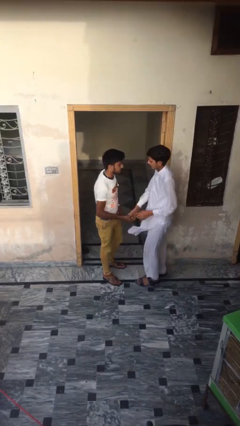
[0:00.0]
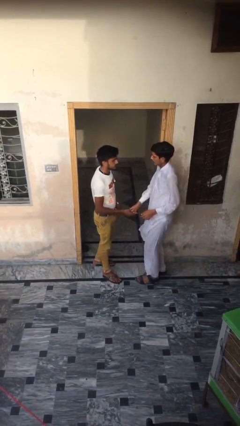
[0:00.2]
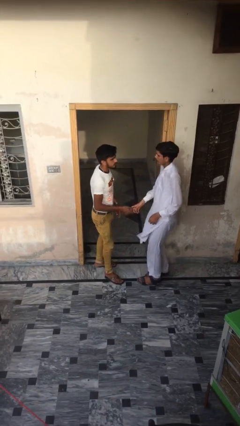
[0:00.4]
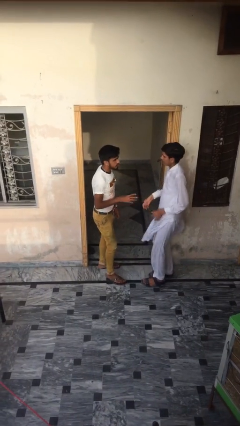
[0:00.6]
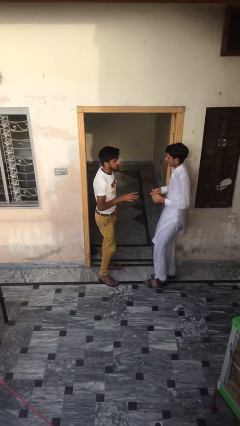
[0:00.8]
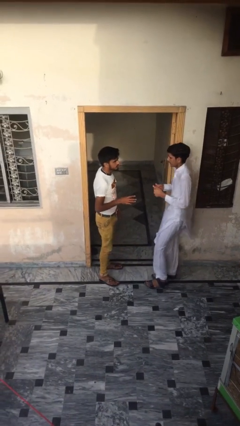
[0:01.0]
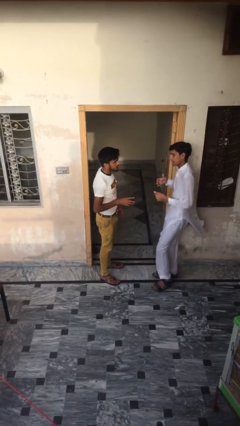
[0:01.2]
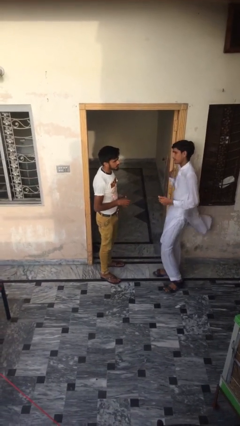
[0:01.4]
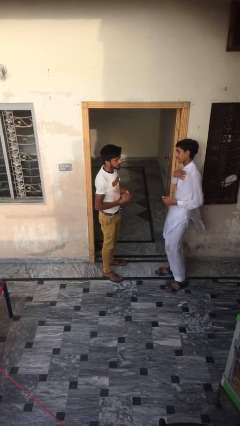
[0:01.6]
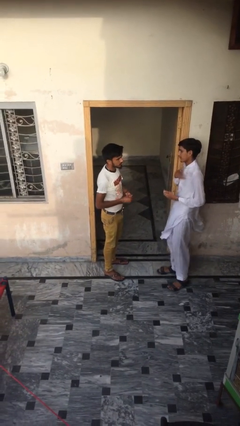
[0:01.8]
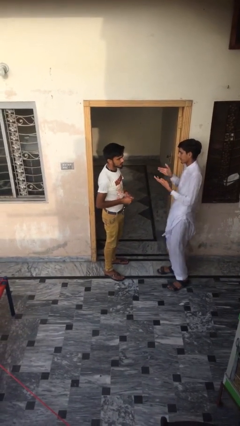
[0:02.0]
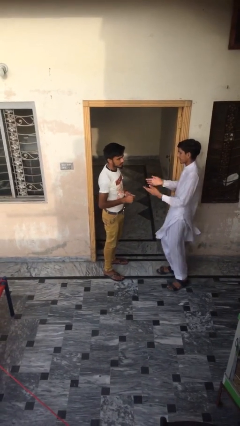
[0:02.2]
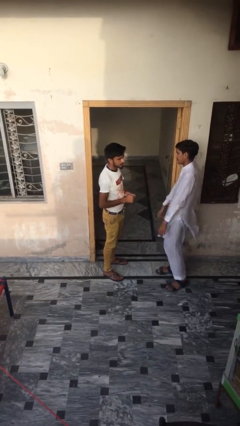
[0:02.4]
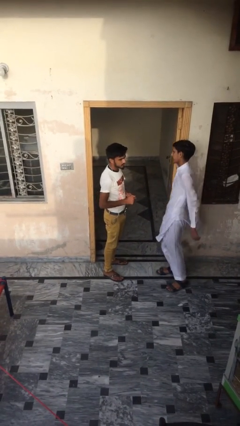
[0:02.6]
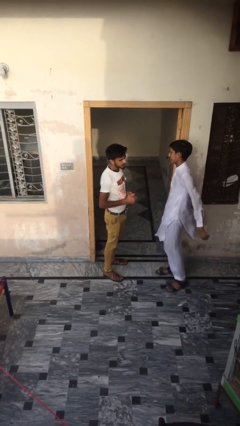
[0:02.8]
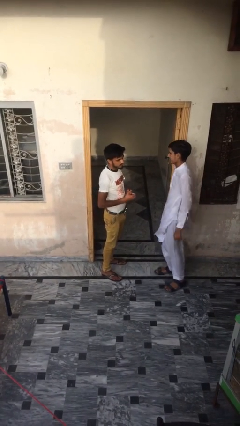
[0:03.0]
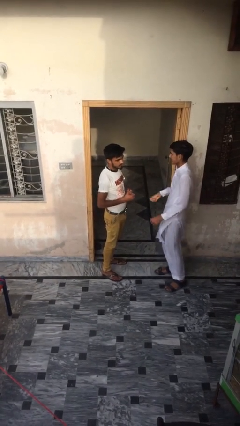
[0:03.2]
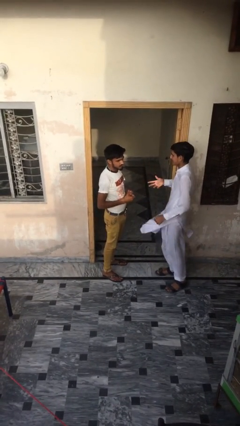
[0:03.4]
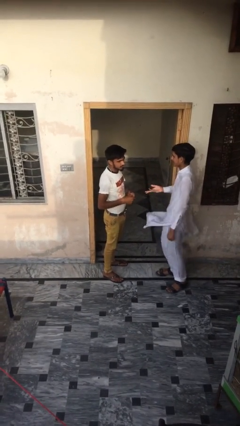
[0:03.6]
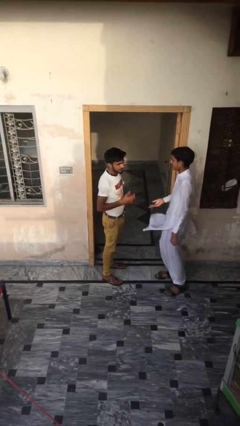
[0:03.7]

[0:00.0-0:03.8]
person talks to person

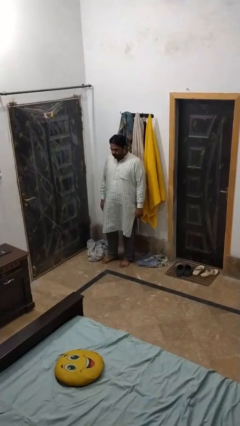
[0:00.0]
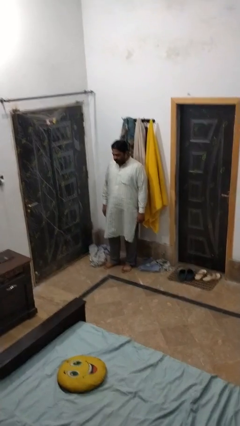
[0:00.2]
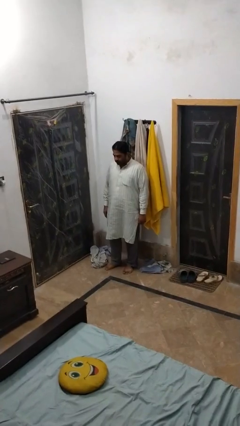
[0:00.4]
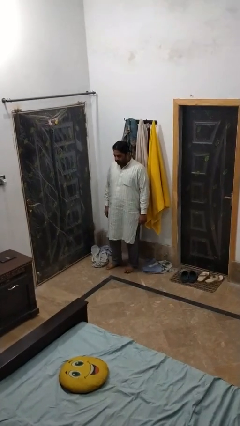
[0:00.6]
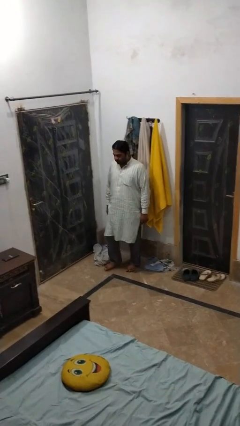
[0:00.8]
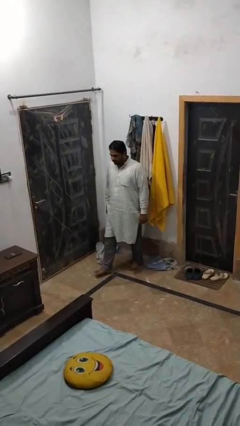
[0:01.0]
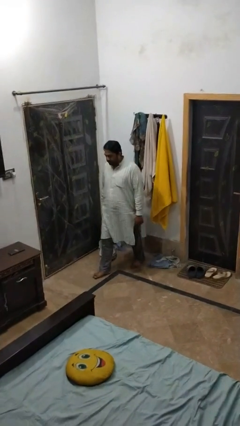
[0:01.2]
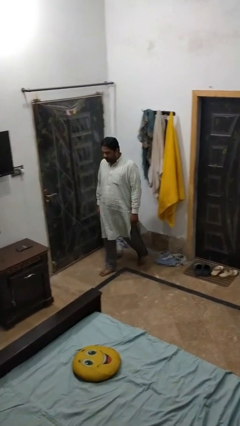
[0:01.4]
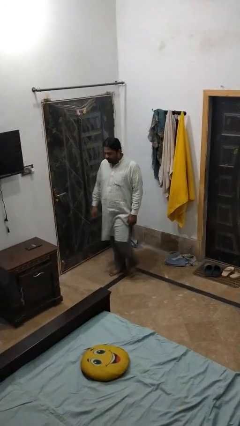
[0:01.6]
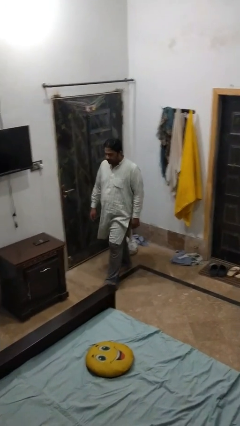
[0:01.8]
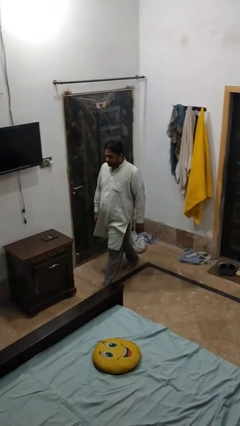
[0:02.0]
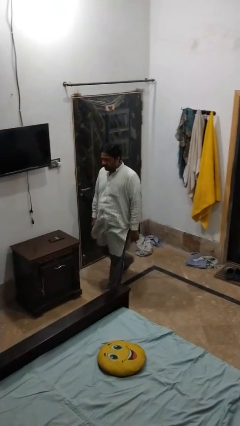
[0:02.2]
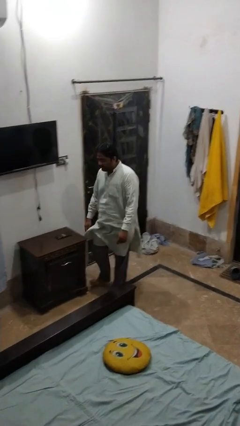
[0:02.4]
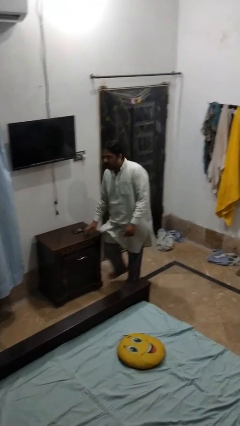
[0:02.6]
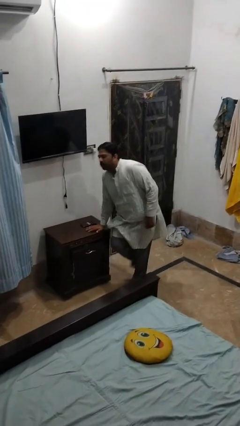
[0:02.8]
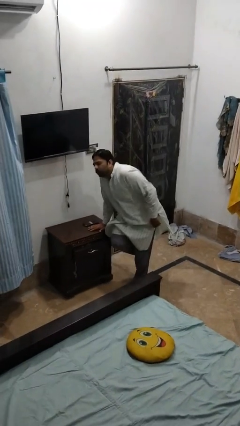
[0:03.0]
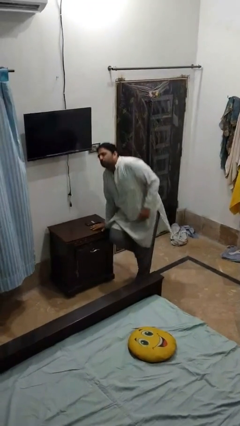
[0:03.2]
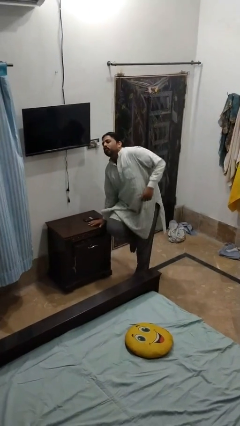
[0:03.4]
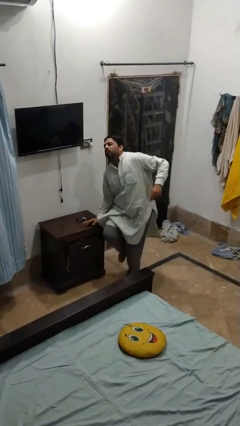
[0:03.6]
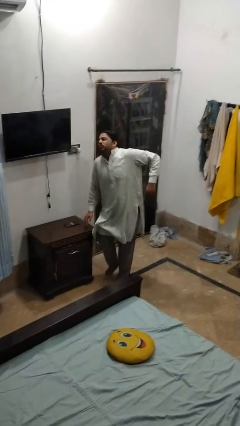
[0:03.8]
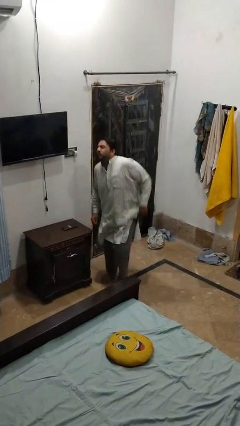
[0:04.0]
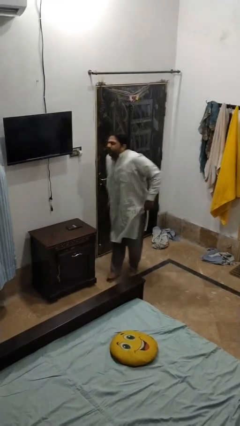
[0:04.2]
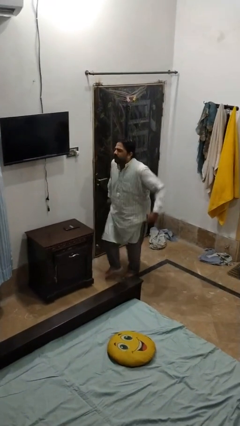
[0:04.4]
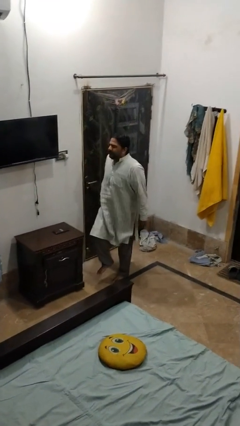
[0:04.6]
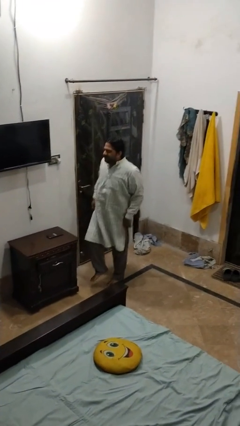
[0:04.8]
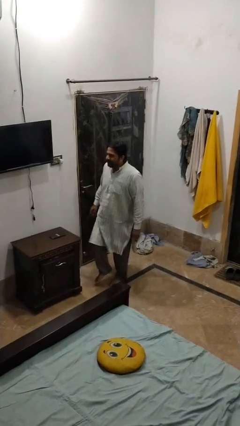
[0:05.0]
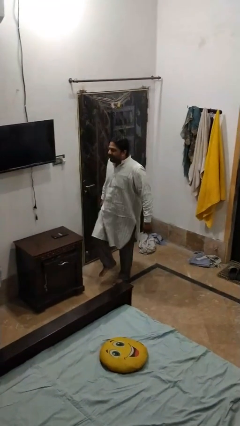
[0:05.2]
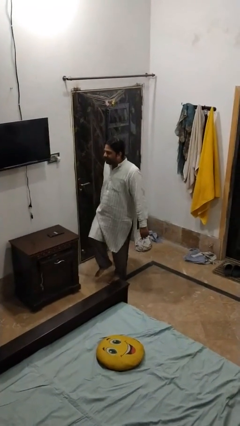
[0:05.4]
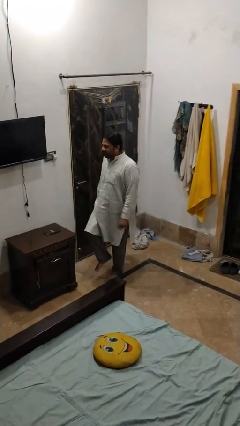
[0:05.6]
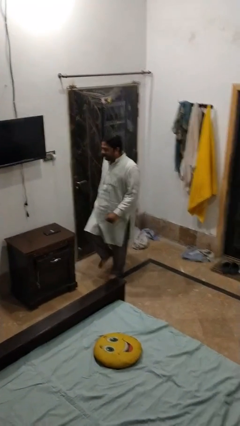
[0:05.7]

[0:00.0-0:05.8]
person shrugs

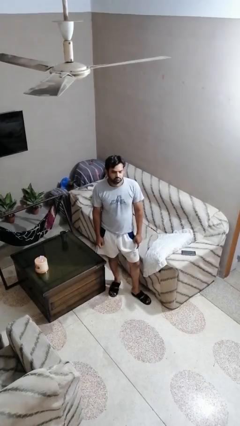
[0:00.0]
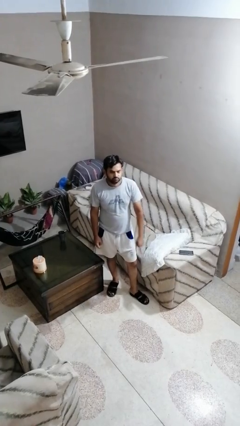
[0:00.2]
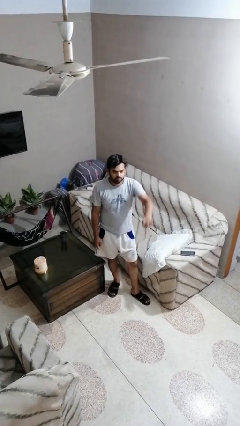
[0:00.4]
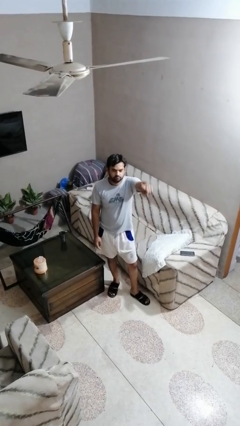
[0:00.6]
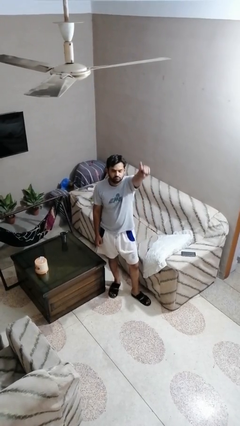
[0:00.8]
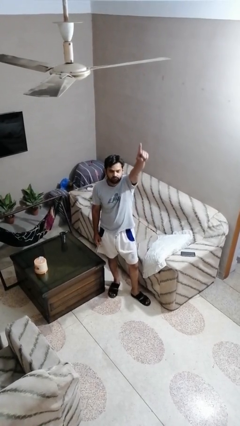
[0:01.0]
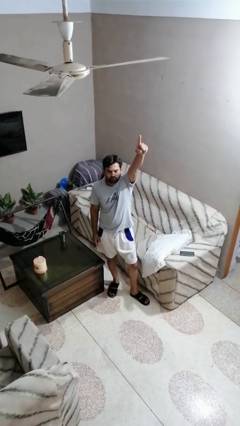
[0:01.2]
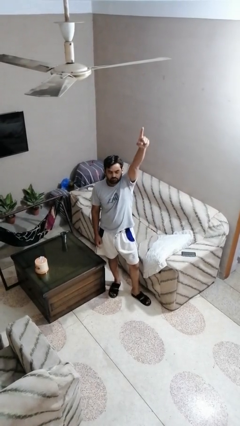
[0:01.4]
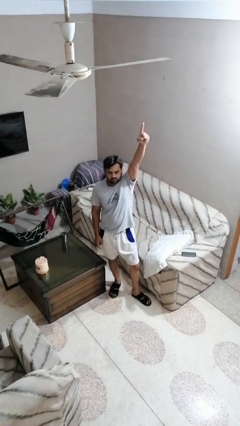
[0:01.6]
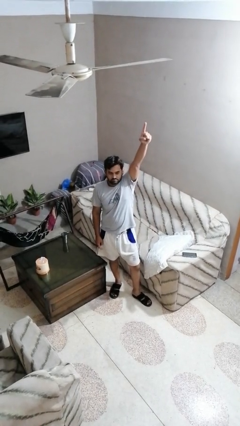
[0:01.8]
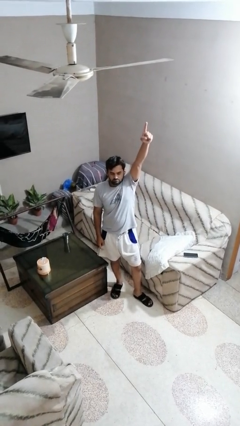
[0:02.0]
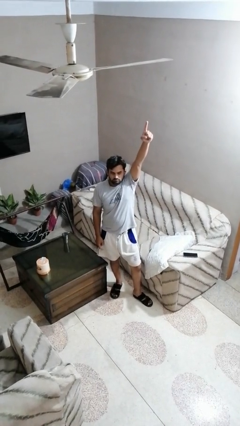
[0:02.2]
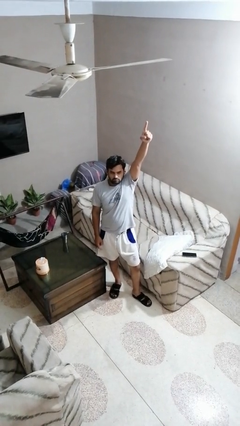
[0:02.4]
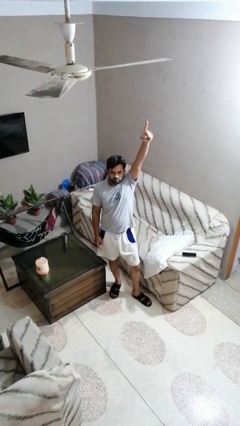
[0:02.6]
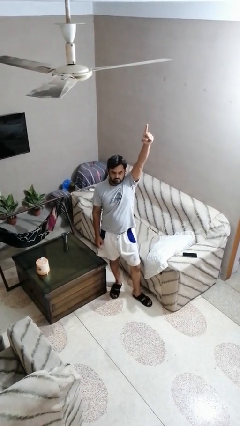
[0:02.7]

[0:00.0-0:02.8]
person gestures number one

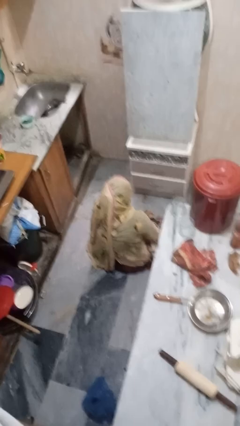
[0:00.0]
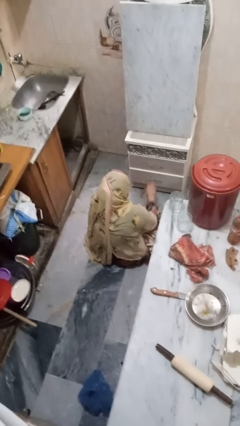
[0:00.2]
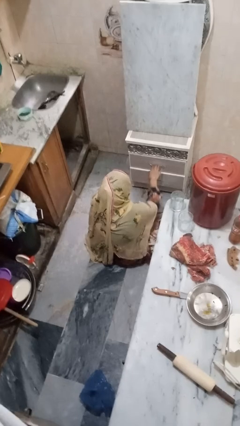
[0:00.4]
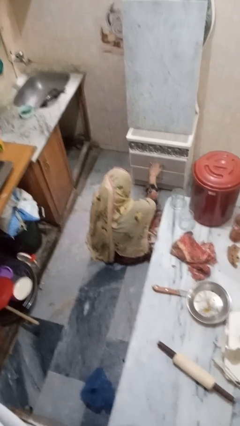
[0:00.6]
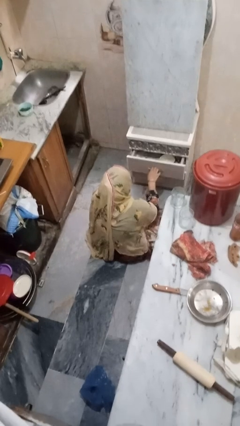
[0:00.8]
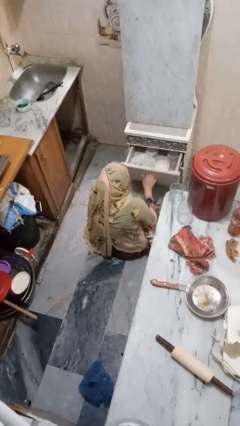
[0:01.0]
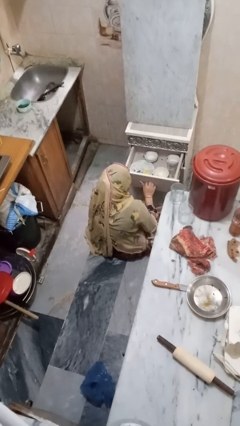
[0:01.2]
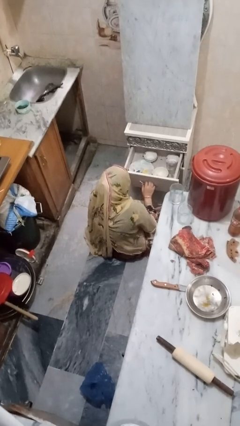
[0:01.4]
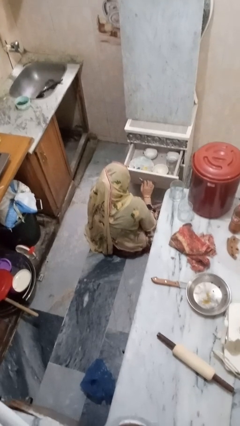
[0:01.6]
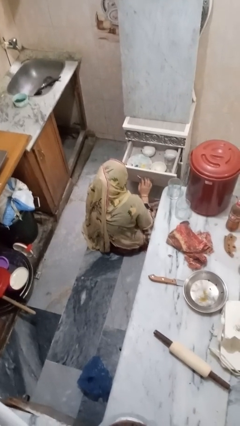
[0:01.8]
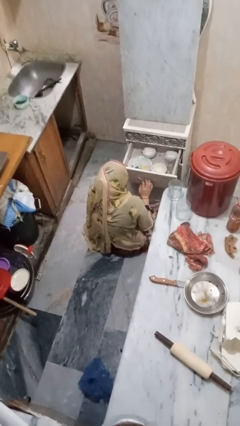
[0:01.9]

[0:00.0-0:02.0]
person opens kitchen drawer

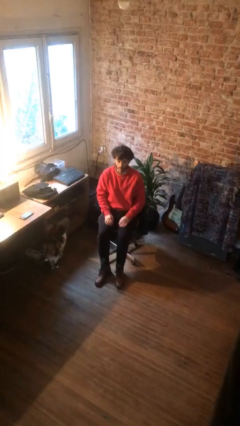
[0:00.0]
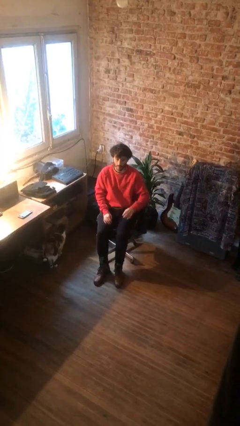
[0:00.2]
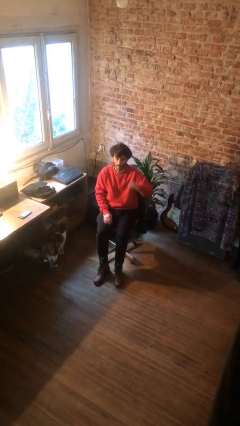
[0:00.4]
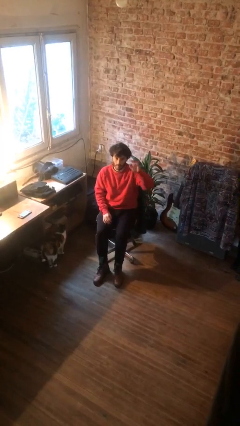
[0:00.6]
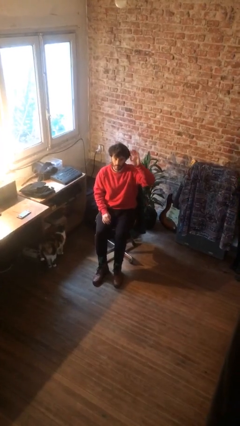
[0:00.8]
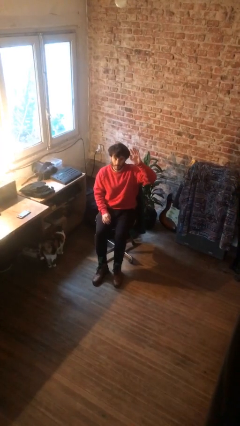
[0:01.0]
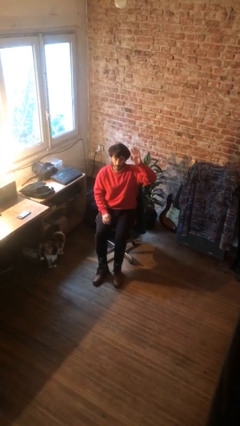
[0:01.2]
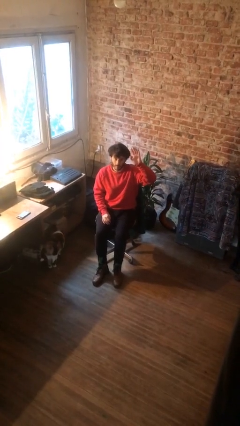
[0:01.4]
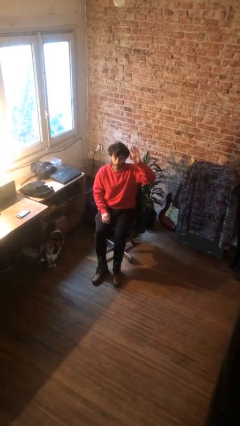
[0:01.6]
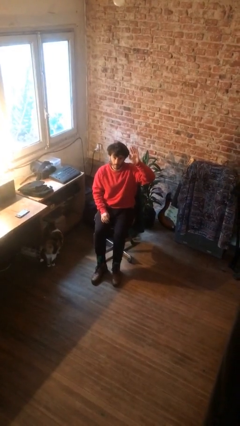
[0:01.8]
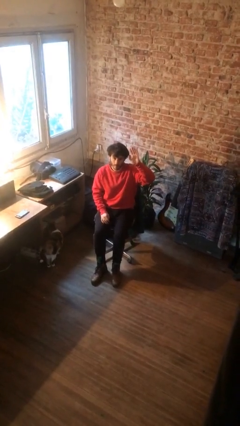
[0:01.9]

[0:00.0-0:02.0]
person gestures raise hand

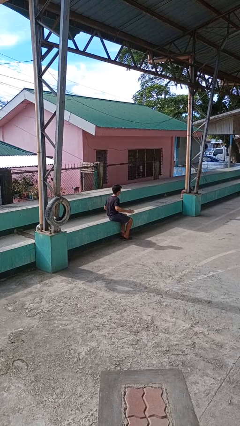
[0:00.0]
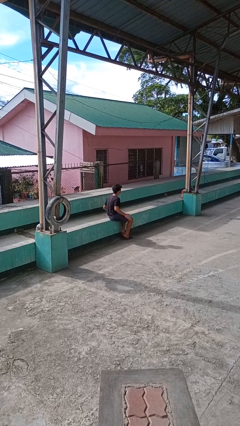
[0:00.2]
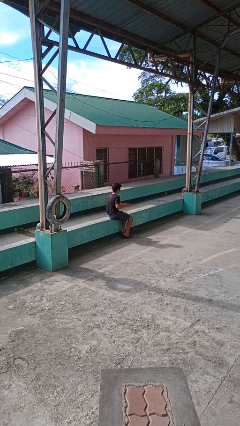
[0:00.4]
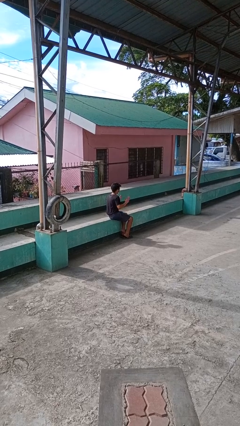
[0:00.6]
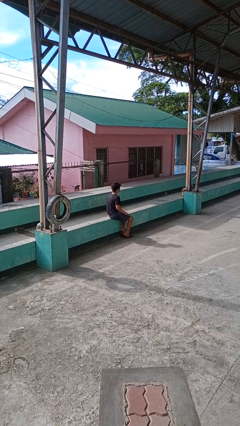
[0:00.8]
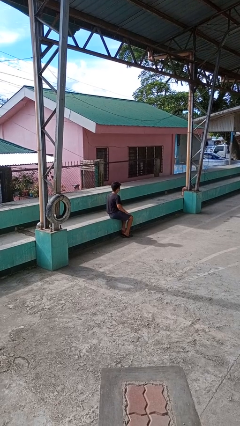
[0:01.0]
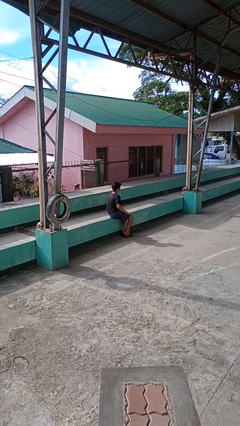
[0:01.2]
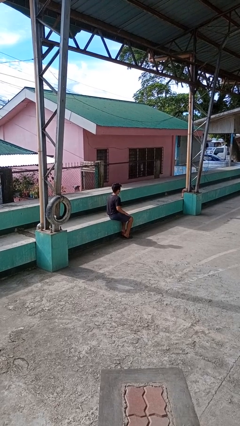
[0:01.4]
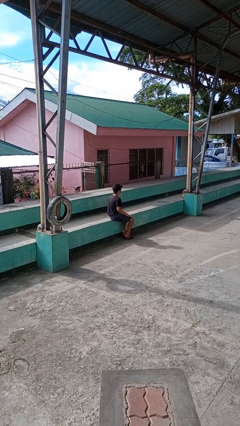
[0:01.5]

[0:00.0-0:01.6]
person slaps hands on thighs
